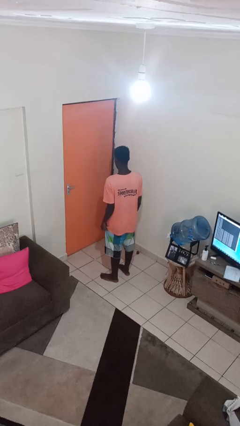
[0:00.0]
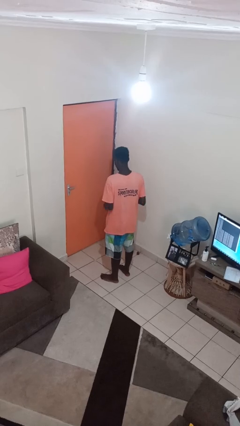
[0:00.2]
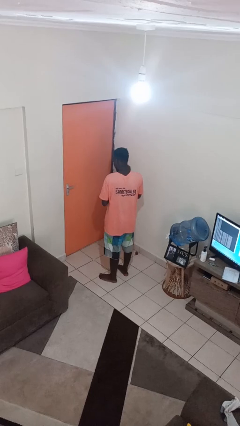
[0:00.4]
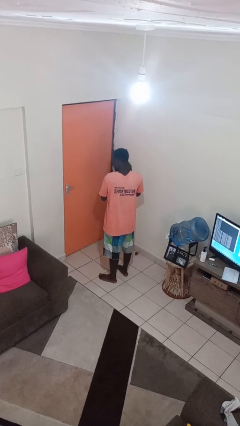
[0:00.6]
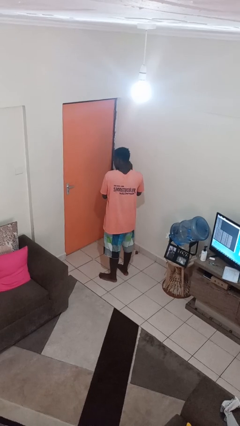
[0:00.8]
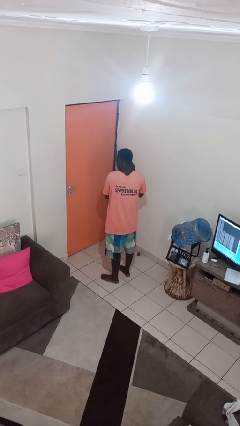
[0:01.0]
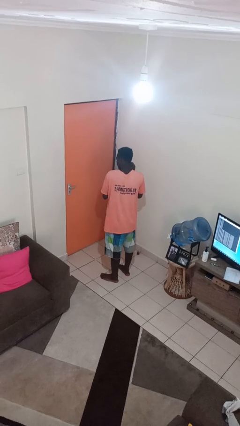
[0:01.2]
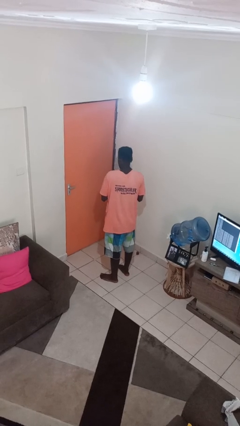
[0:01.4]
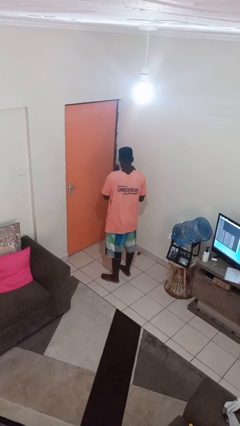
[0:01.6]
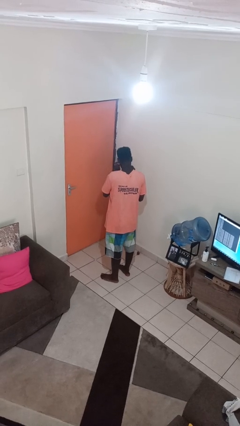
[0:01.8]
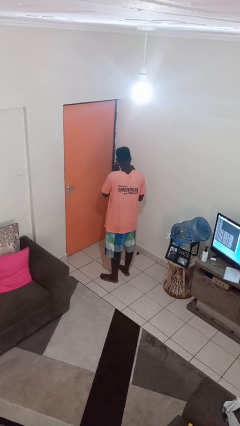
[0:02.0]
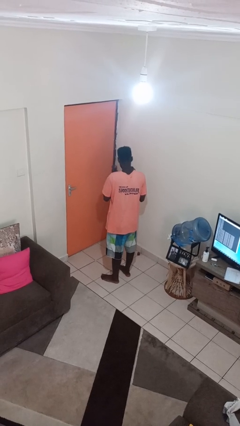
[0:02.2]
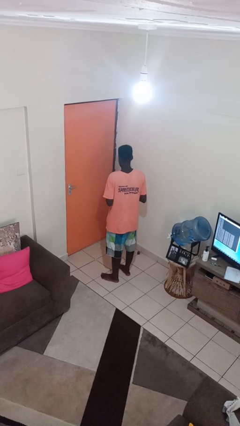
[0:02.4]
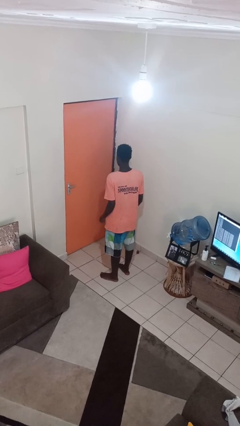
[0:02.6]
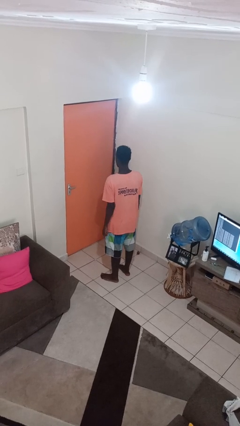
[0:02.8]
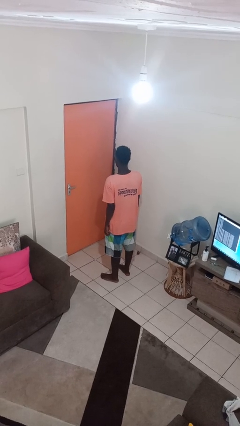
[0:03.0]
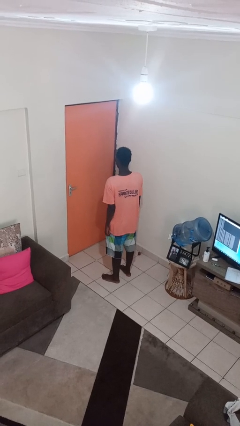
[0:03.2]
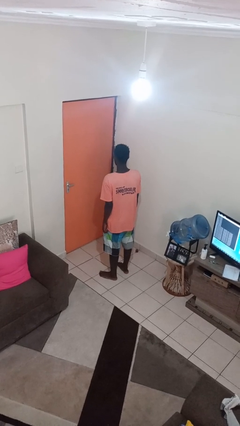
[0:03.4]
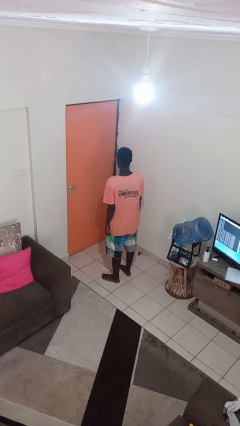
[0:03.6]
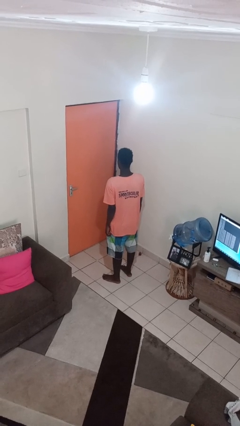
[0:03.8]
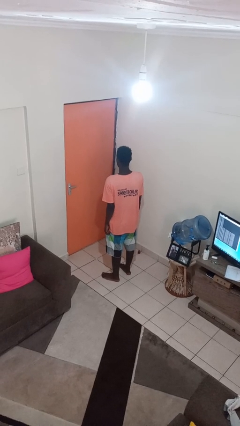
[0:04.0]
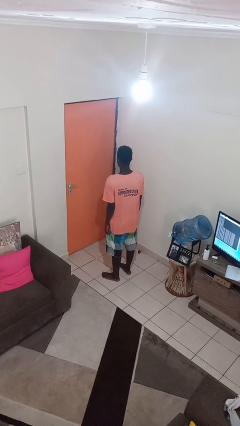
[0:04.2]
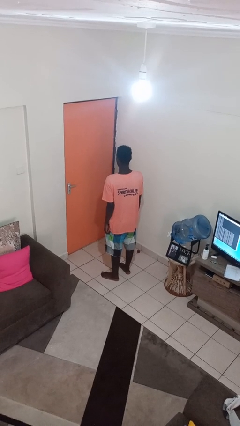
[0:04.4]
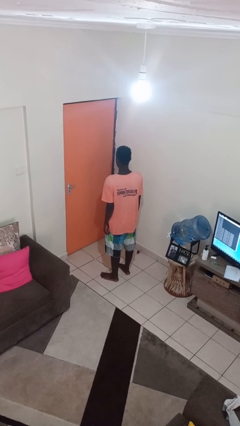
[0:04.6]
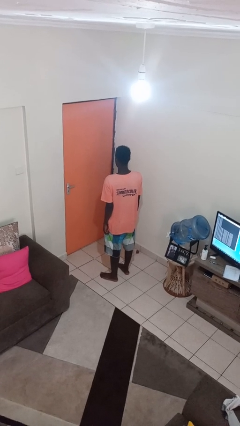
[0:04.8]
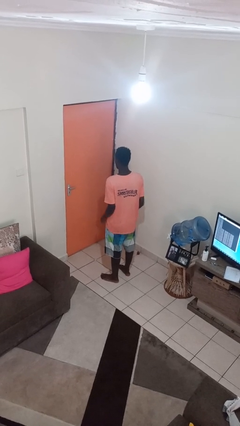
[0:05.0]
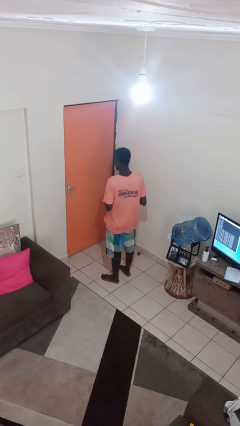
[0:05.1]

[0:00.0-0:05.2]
person puts on earrings

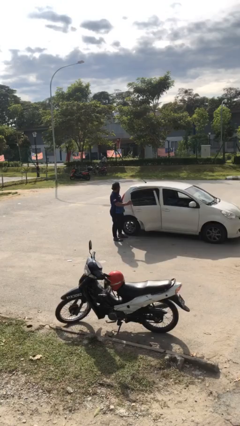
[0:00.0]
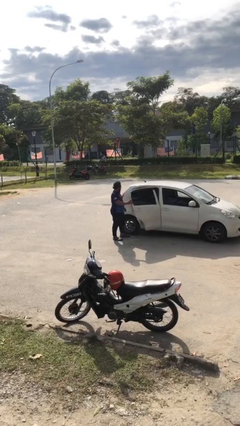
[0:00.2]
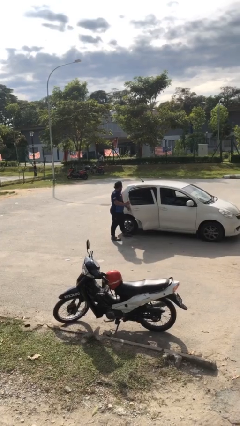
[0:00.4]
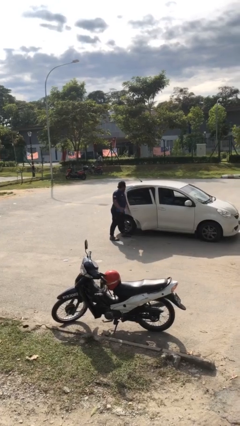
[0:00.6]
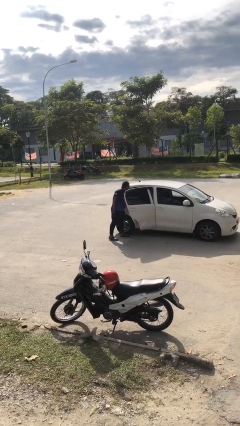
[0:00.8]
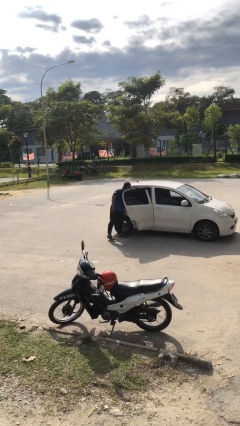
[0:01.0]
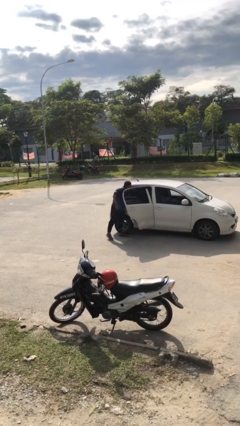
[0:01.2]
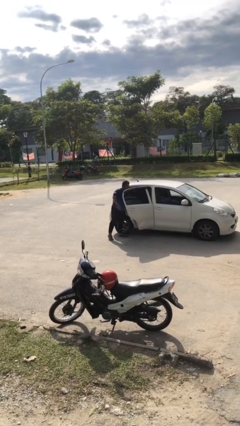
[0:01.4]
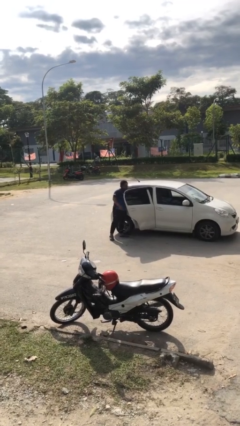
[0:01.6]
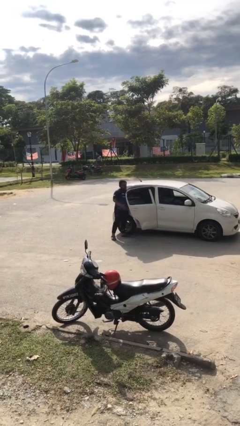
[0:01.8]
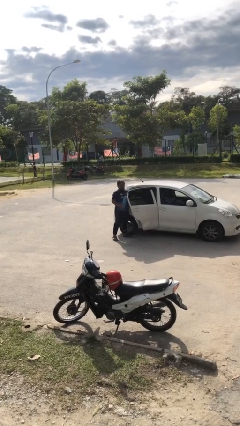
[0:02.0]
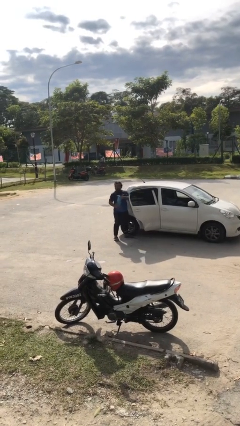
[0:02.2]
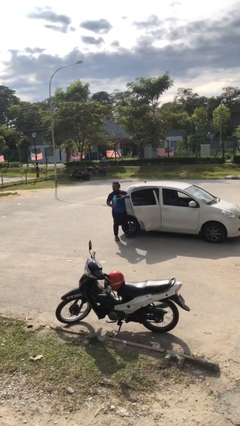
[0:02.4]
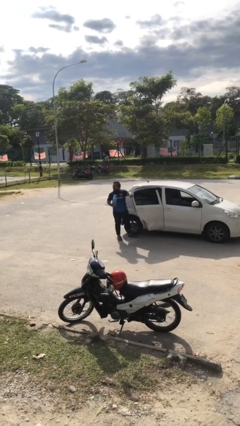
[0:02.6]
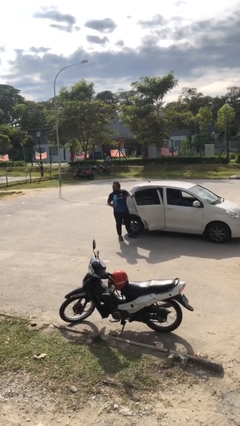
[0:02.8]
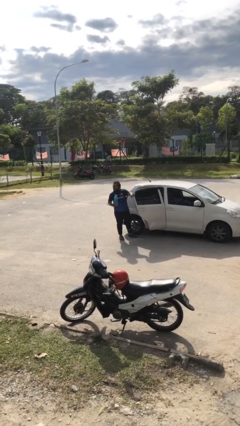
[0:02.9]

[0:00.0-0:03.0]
person unloads car

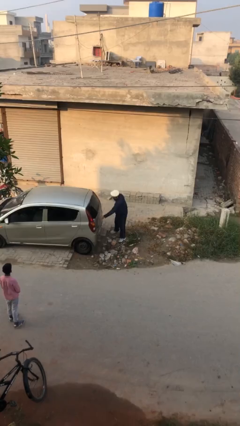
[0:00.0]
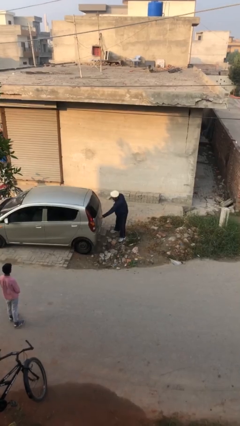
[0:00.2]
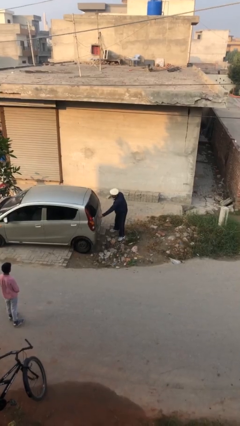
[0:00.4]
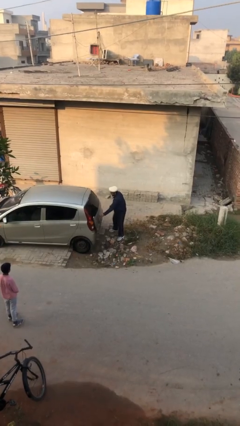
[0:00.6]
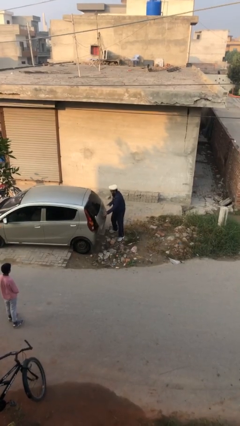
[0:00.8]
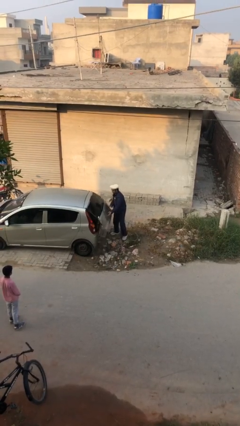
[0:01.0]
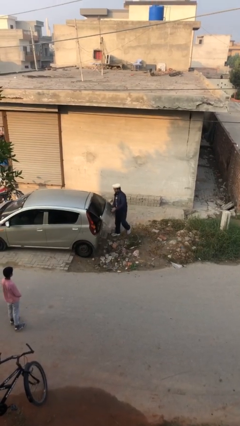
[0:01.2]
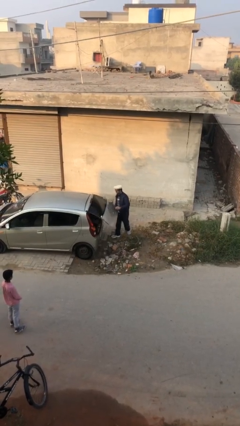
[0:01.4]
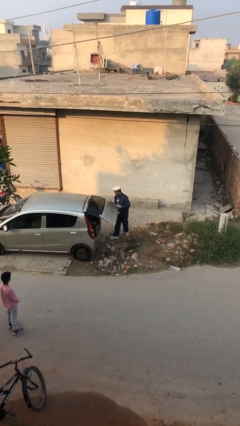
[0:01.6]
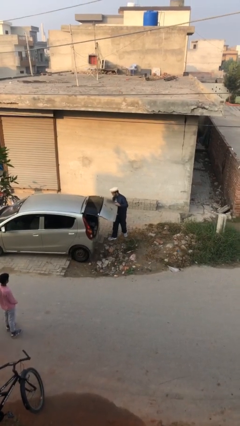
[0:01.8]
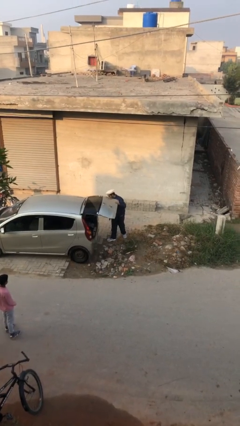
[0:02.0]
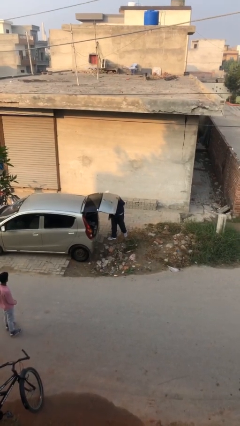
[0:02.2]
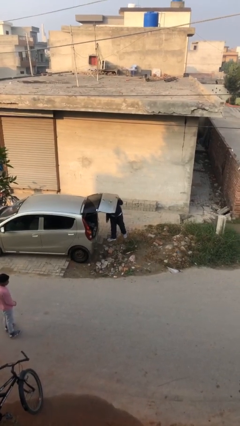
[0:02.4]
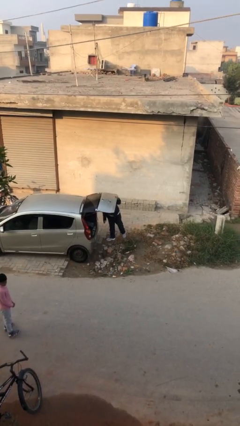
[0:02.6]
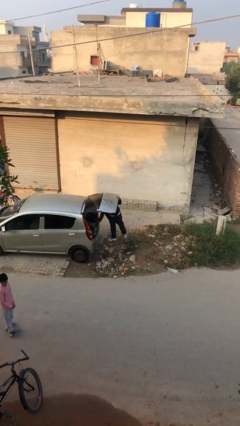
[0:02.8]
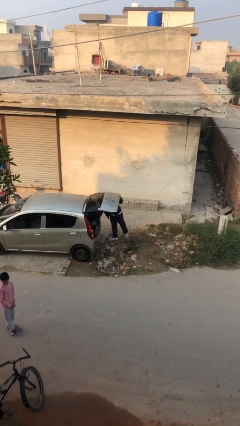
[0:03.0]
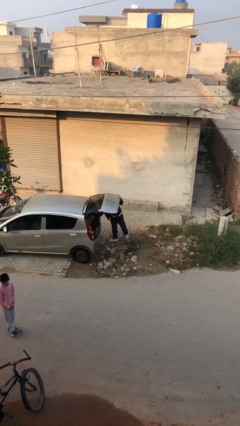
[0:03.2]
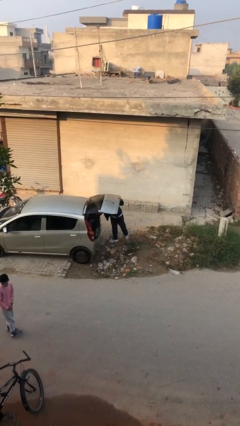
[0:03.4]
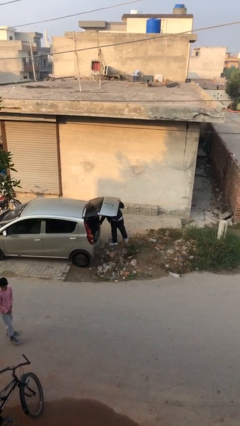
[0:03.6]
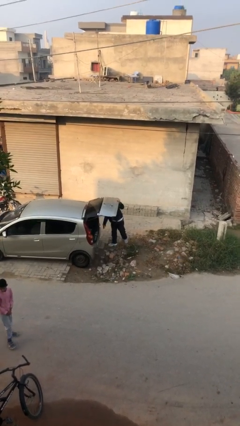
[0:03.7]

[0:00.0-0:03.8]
person opens car trunk

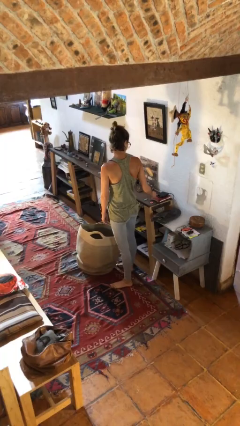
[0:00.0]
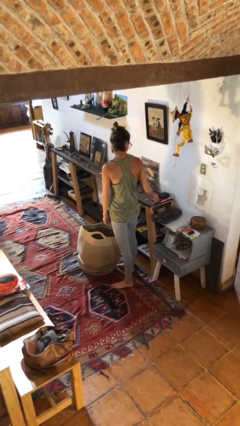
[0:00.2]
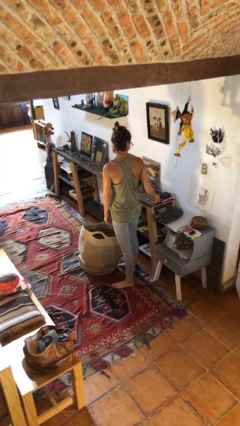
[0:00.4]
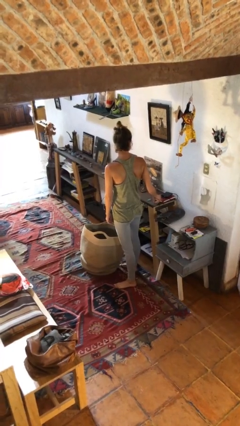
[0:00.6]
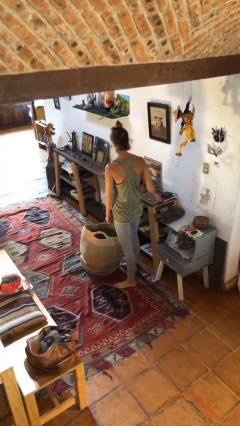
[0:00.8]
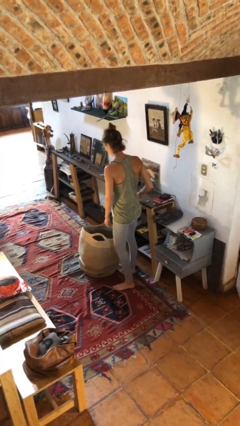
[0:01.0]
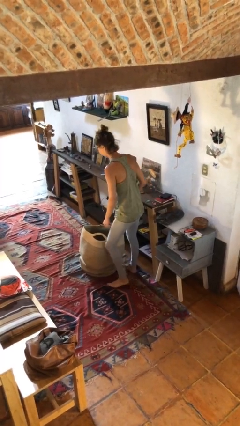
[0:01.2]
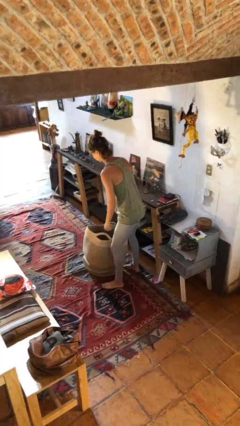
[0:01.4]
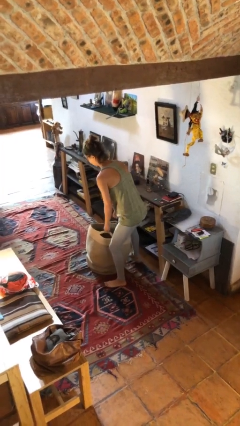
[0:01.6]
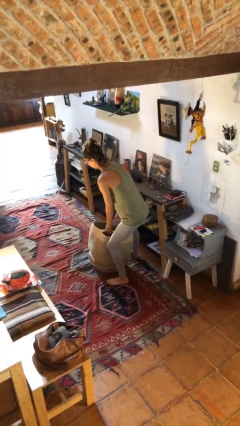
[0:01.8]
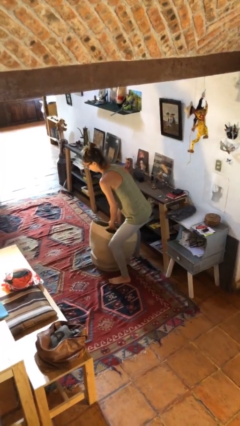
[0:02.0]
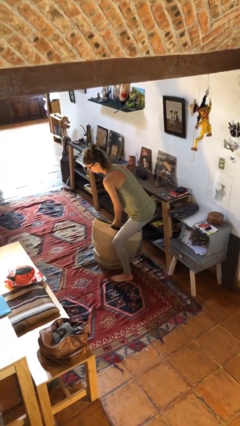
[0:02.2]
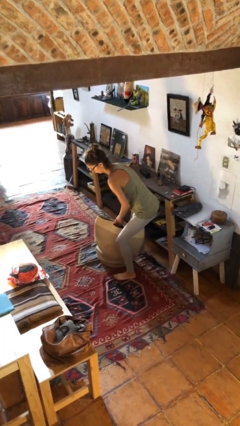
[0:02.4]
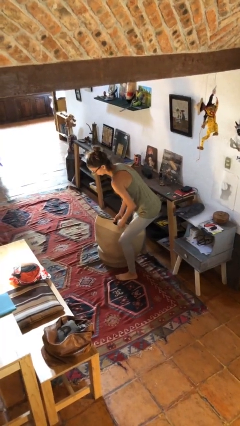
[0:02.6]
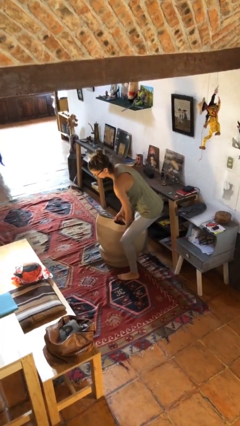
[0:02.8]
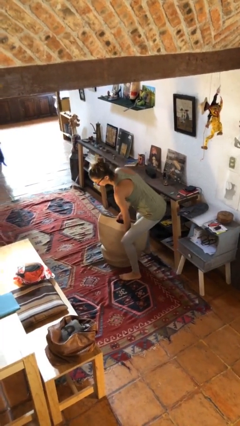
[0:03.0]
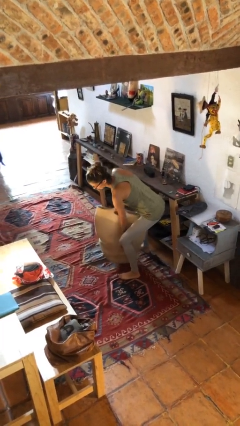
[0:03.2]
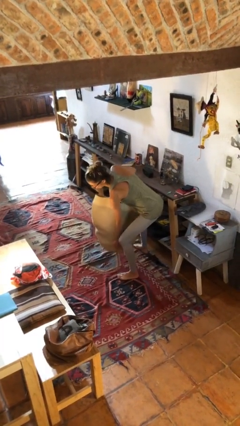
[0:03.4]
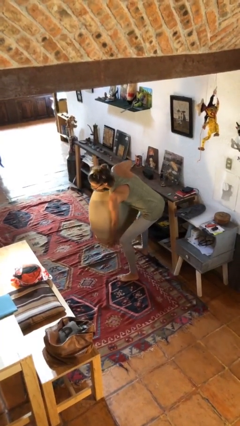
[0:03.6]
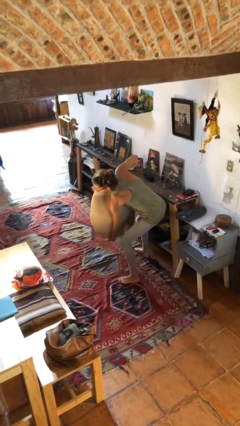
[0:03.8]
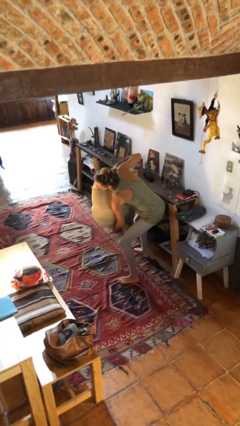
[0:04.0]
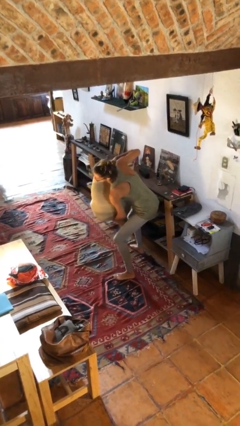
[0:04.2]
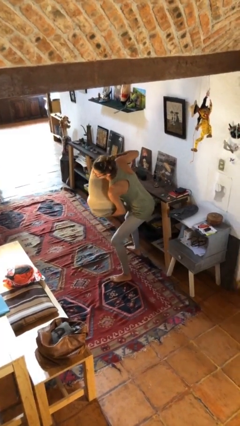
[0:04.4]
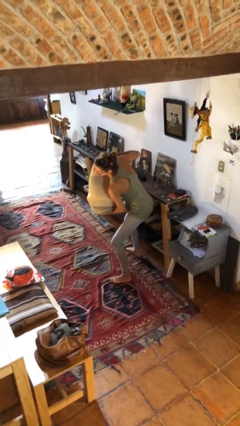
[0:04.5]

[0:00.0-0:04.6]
person picks up object from floor

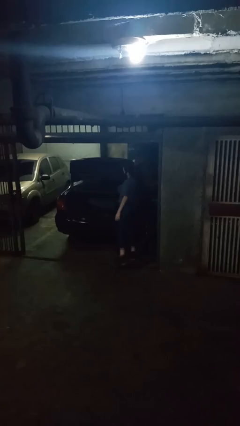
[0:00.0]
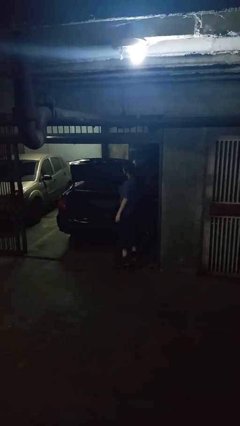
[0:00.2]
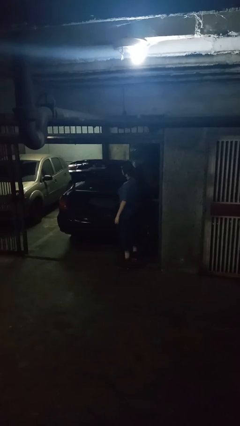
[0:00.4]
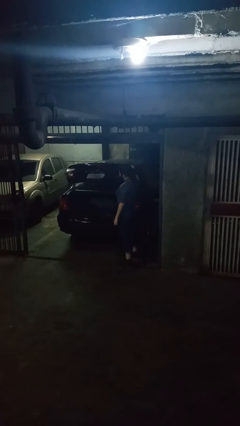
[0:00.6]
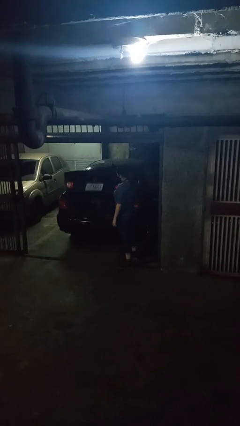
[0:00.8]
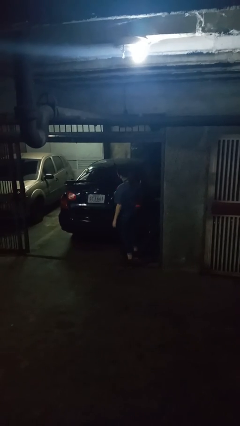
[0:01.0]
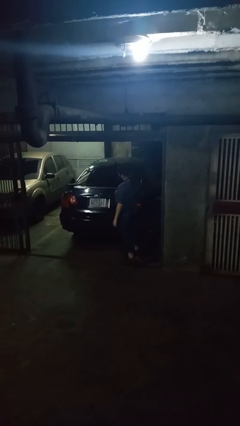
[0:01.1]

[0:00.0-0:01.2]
person closes car trunk

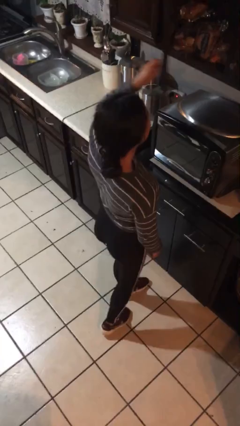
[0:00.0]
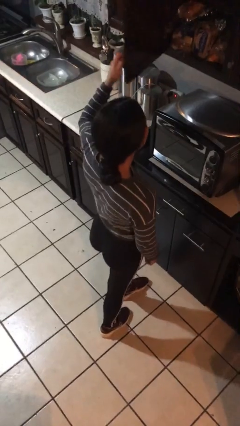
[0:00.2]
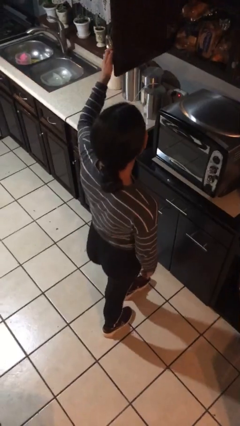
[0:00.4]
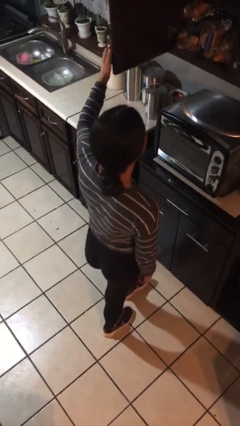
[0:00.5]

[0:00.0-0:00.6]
person opens cabinet
